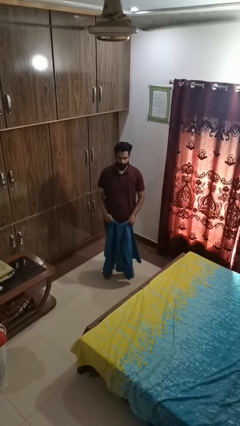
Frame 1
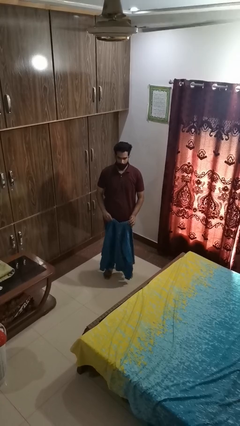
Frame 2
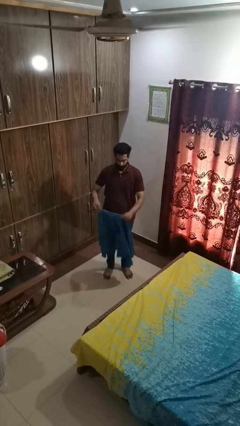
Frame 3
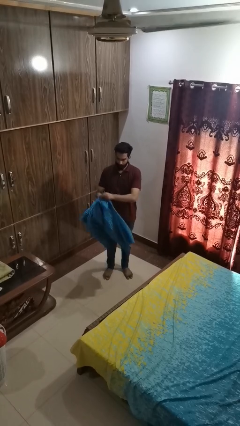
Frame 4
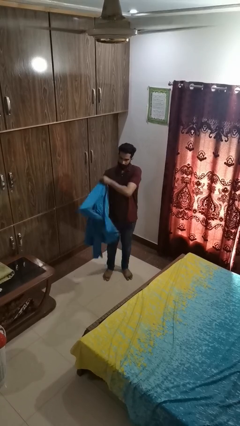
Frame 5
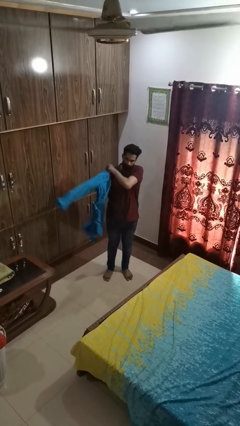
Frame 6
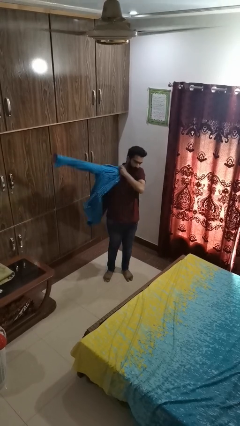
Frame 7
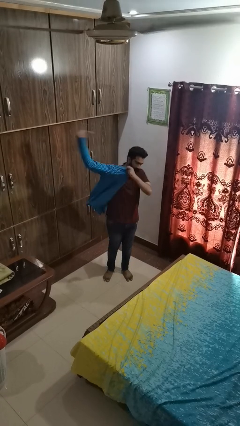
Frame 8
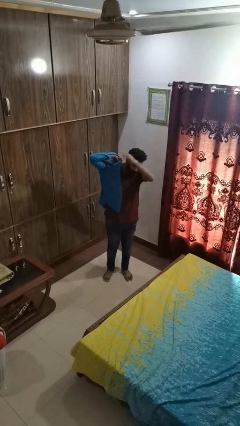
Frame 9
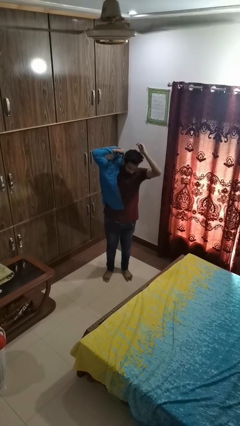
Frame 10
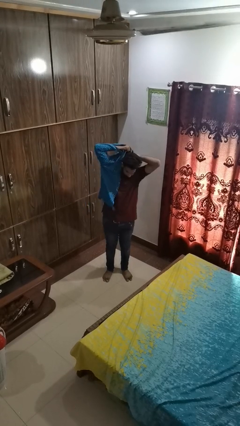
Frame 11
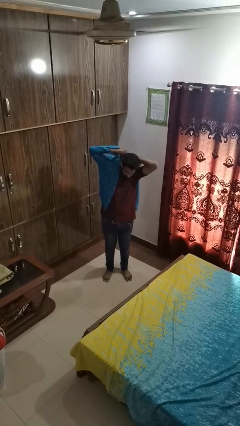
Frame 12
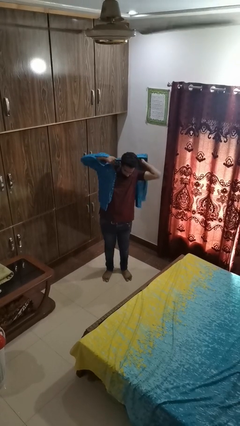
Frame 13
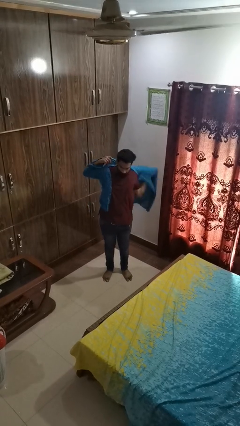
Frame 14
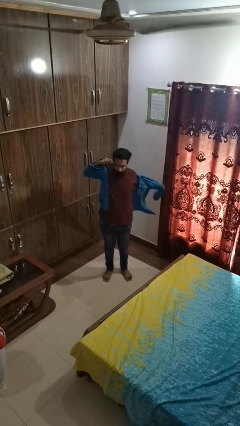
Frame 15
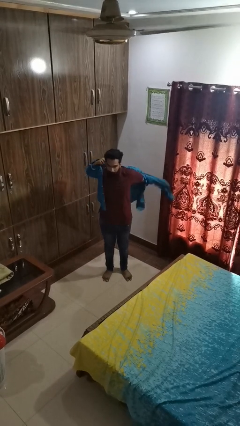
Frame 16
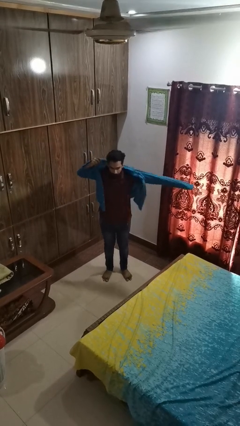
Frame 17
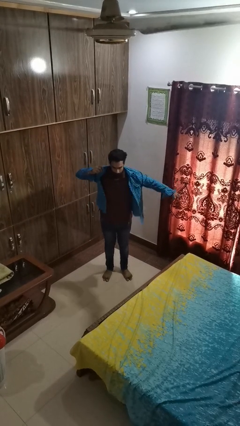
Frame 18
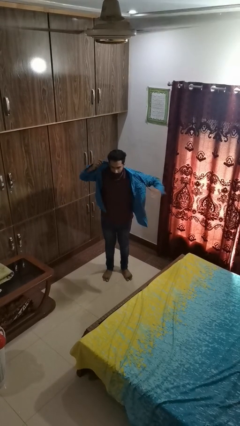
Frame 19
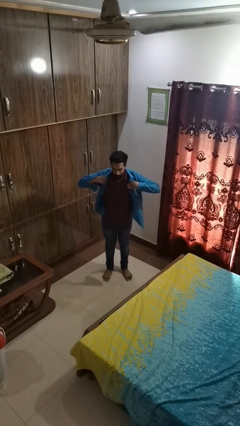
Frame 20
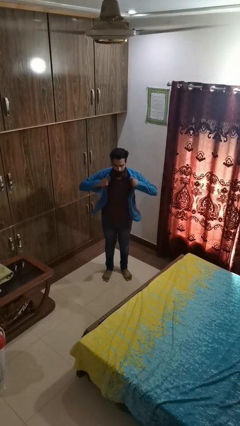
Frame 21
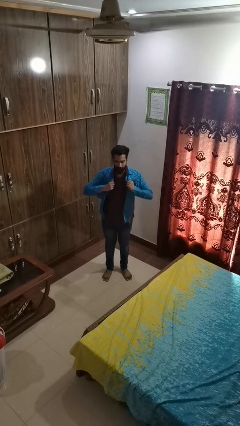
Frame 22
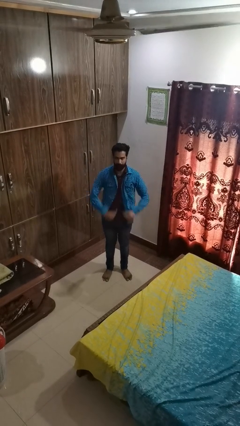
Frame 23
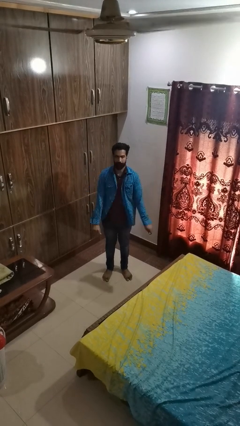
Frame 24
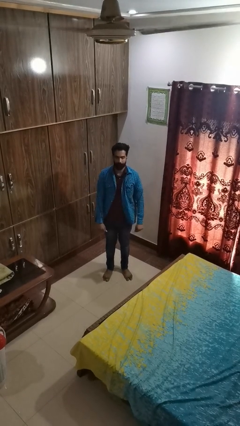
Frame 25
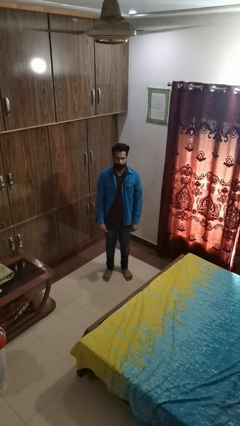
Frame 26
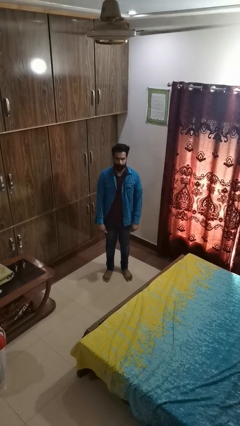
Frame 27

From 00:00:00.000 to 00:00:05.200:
person puts on shirt

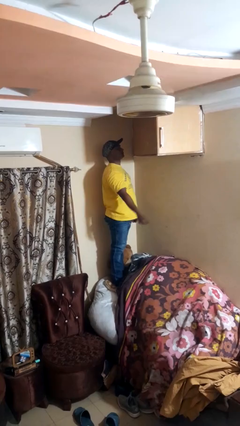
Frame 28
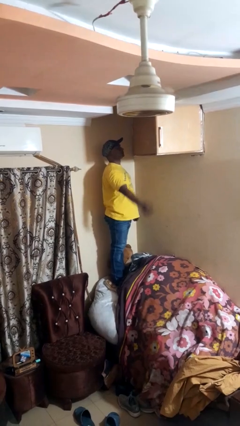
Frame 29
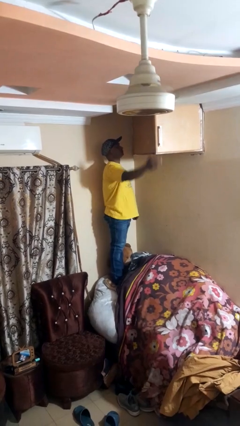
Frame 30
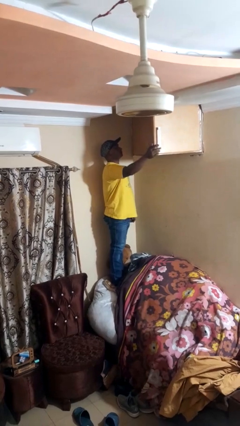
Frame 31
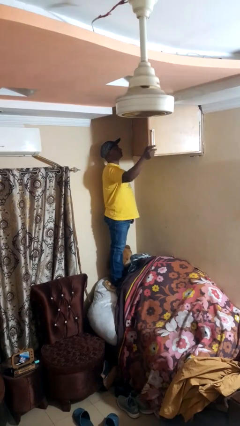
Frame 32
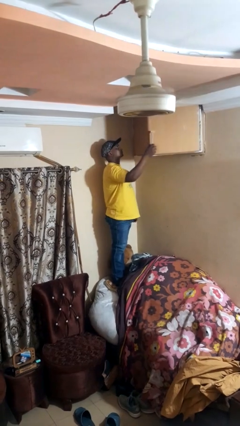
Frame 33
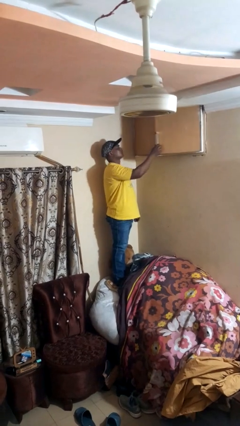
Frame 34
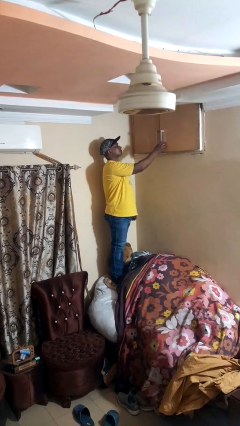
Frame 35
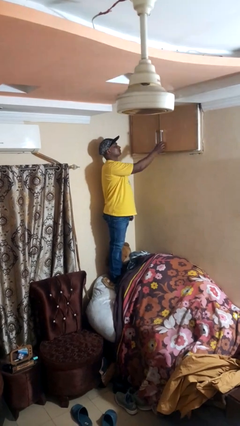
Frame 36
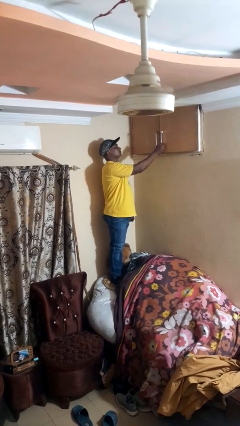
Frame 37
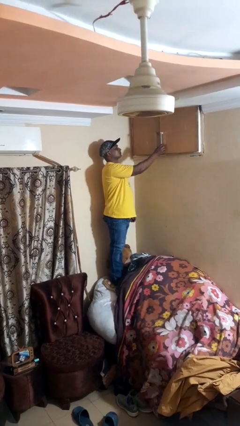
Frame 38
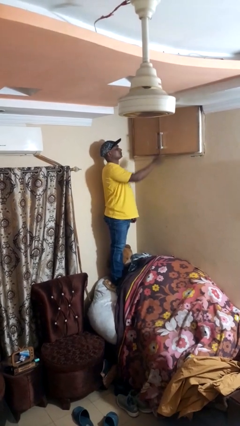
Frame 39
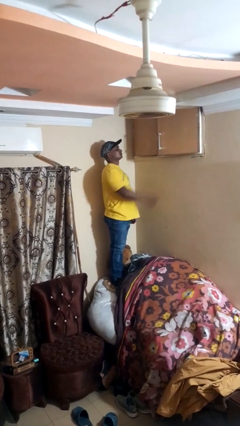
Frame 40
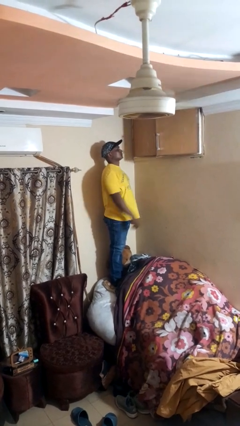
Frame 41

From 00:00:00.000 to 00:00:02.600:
person closes closet door

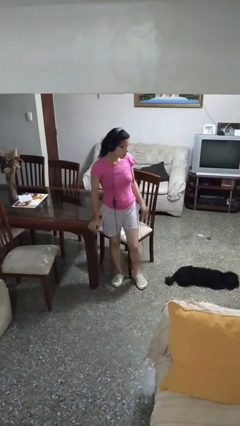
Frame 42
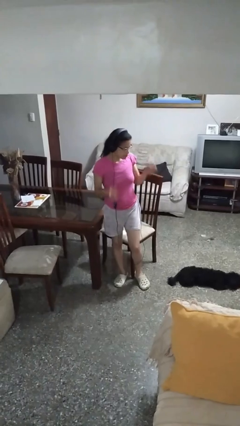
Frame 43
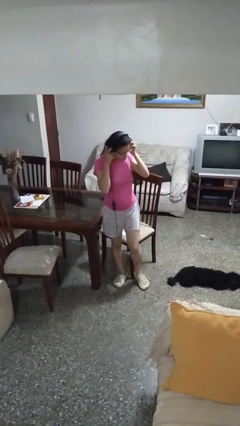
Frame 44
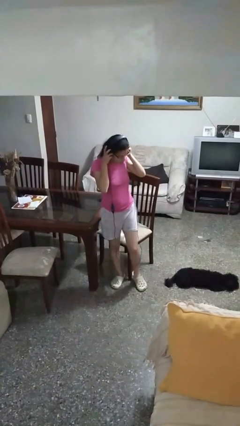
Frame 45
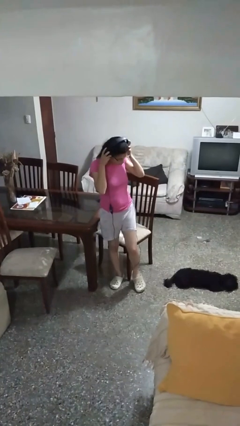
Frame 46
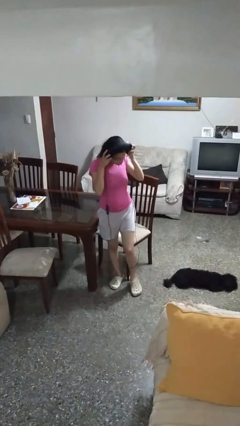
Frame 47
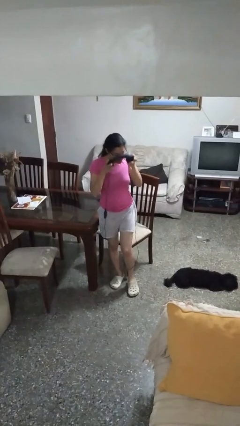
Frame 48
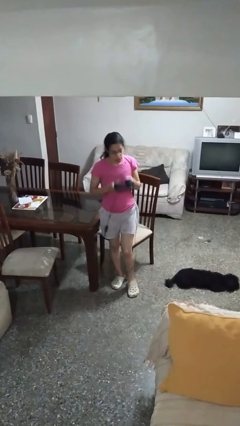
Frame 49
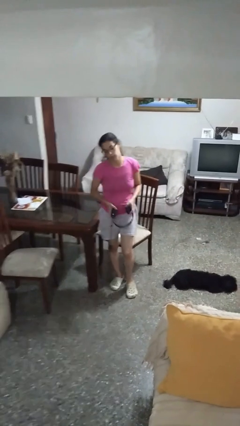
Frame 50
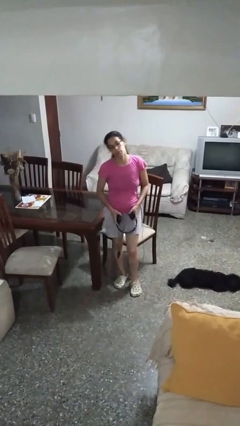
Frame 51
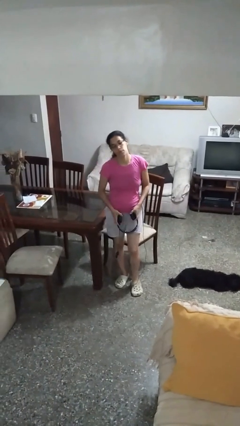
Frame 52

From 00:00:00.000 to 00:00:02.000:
person takes off headphones

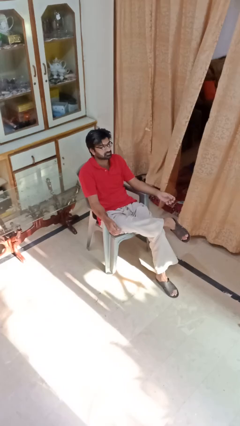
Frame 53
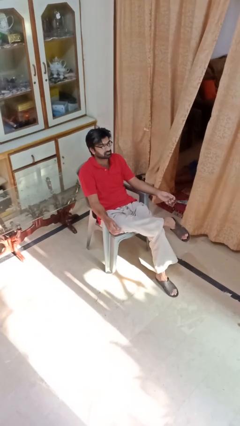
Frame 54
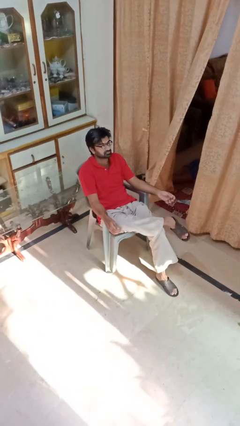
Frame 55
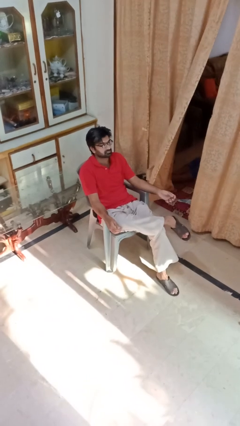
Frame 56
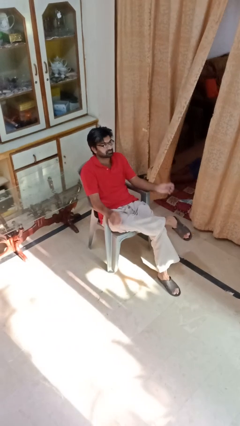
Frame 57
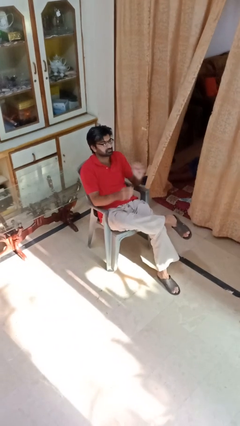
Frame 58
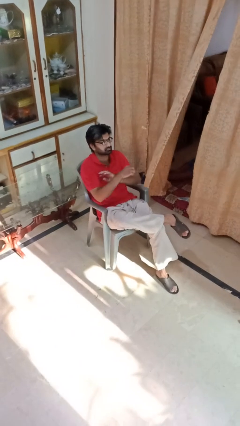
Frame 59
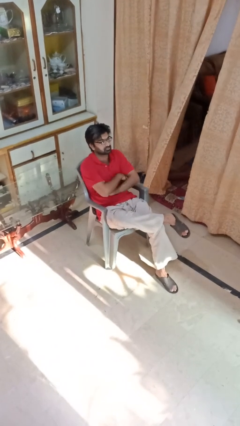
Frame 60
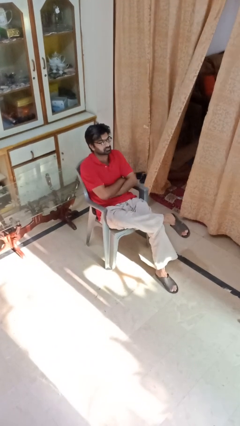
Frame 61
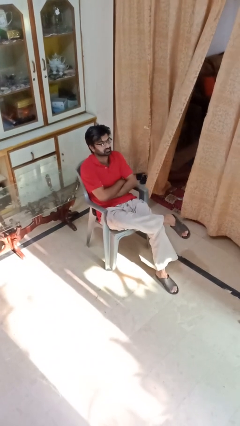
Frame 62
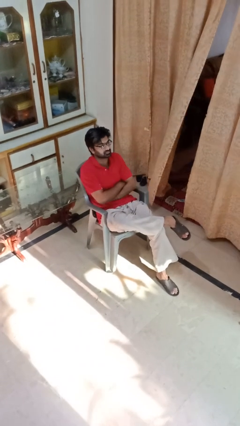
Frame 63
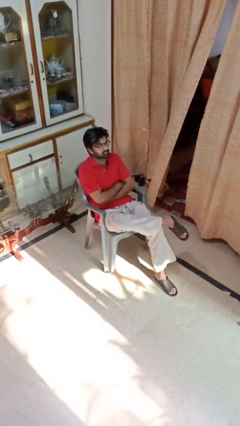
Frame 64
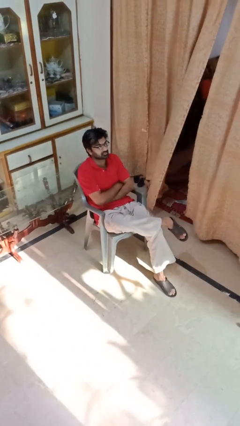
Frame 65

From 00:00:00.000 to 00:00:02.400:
person crosses arms

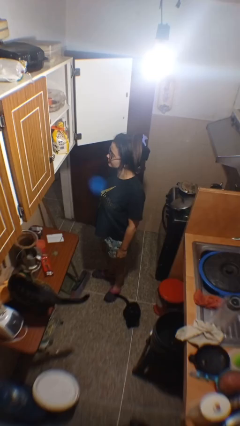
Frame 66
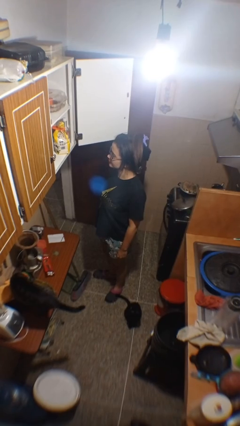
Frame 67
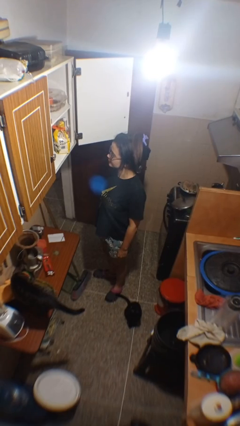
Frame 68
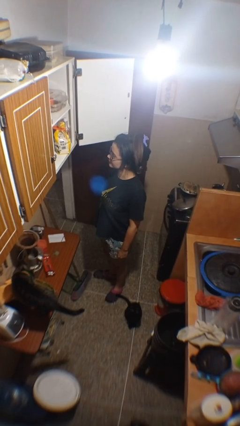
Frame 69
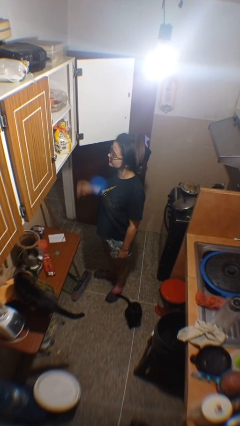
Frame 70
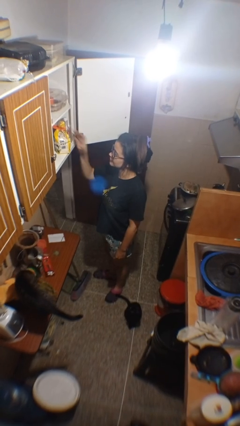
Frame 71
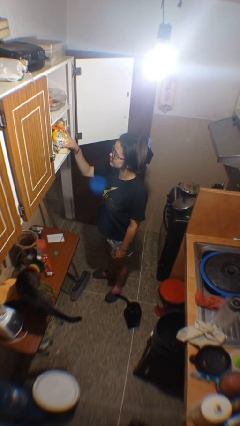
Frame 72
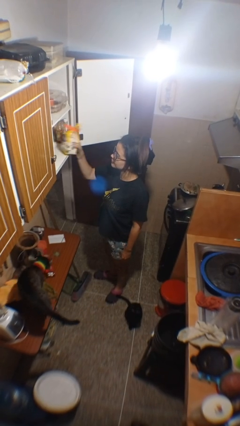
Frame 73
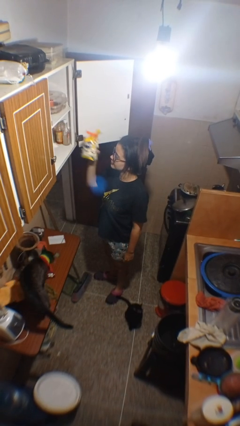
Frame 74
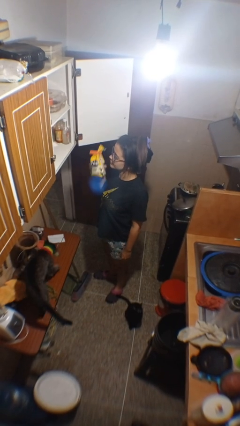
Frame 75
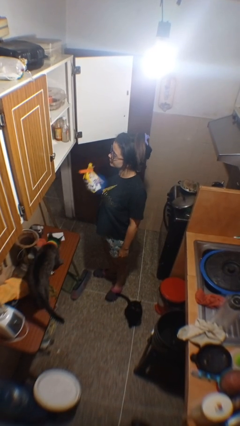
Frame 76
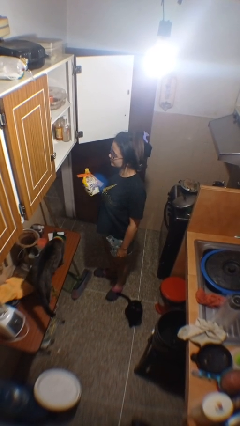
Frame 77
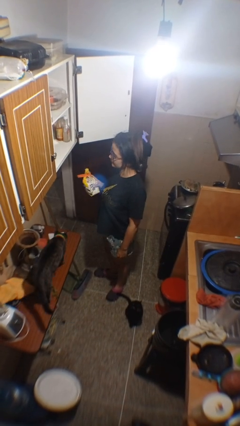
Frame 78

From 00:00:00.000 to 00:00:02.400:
person picks up object from cabinet

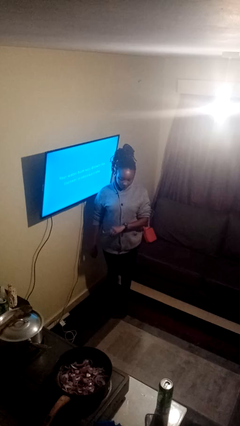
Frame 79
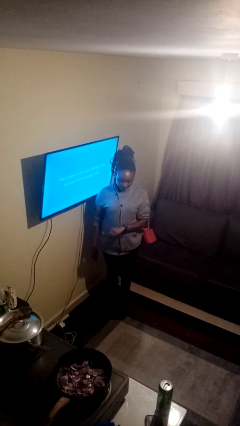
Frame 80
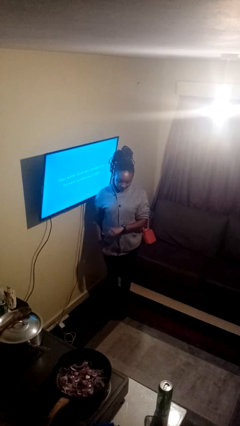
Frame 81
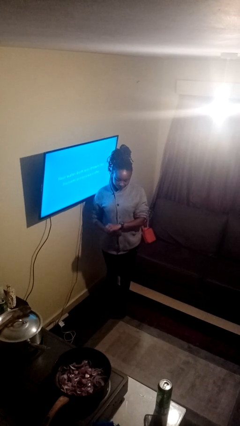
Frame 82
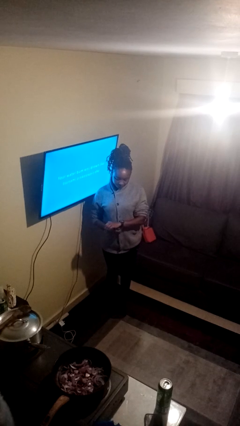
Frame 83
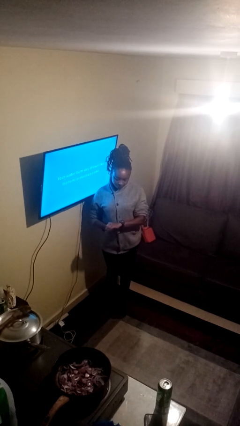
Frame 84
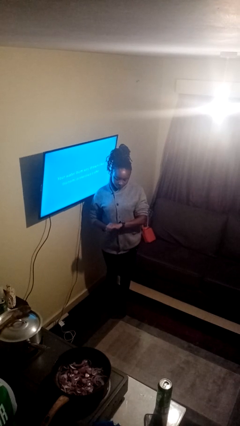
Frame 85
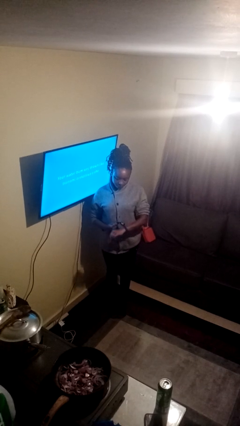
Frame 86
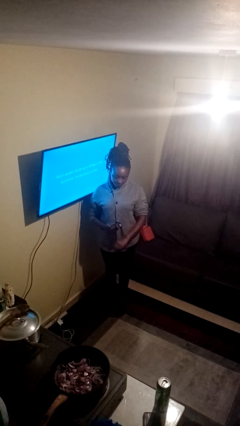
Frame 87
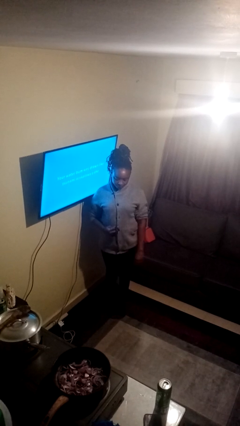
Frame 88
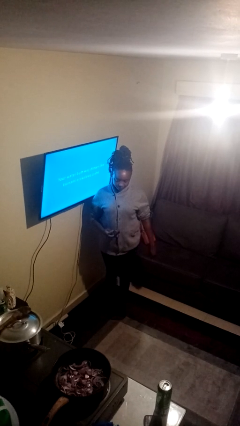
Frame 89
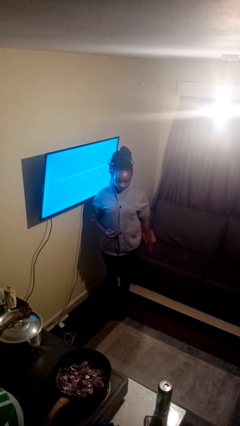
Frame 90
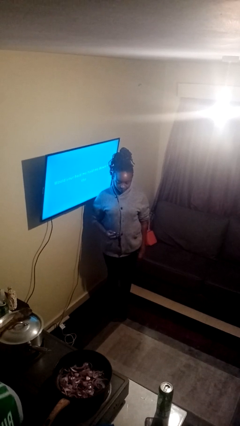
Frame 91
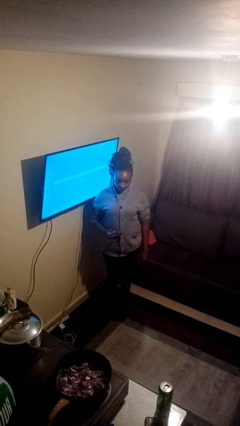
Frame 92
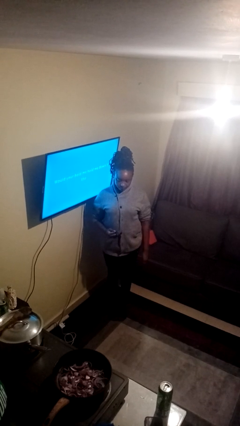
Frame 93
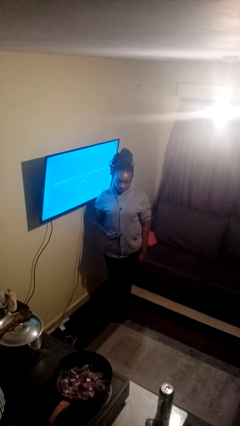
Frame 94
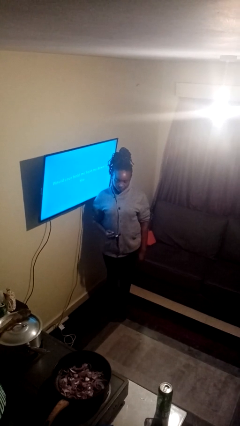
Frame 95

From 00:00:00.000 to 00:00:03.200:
person takes off wristwatch
